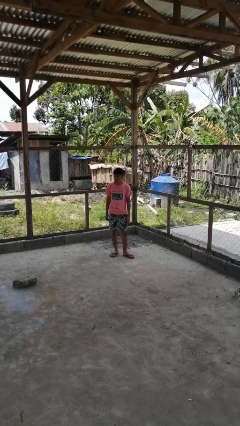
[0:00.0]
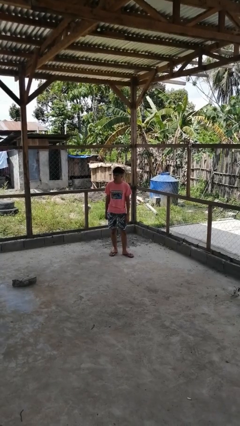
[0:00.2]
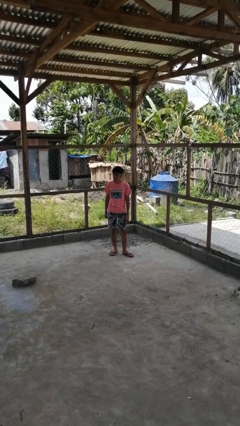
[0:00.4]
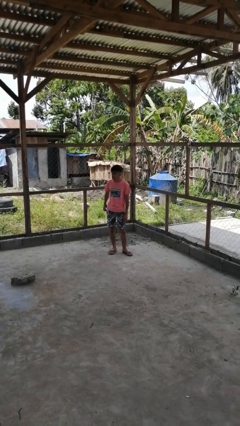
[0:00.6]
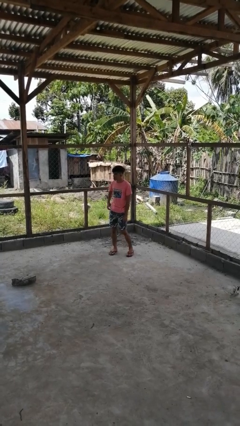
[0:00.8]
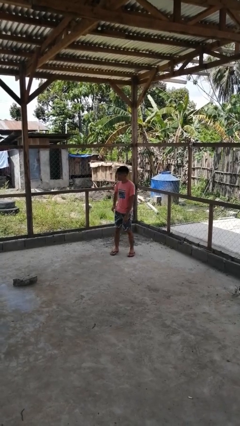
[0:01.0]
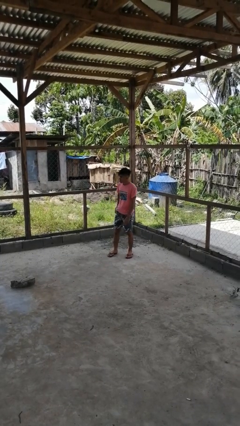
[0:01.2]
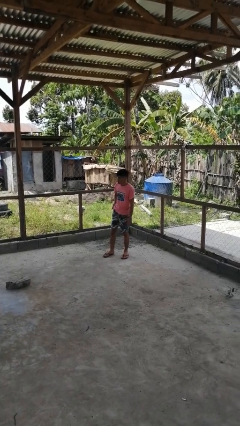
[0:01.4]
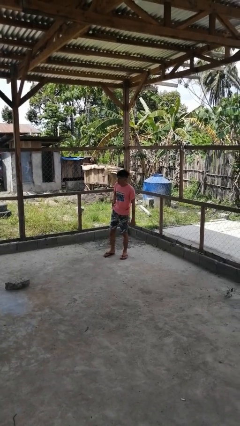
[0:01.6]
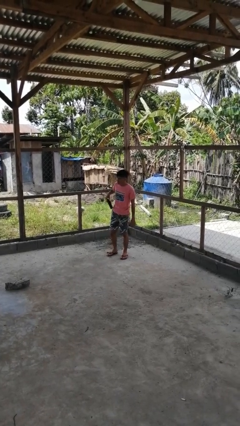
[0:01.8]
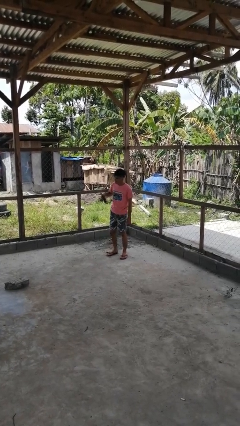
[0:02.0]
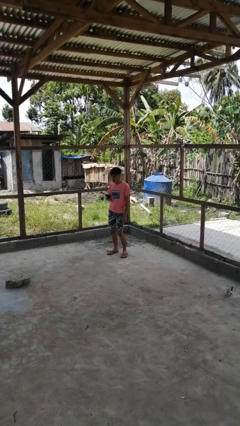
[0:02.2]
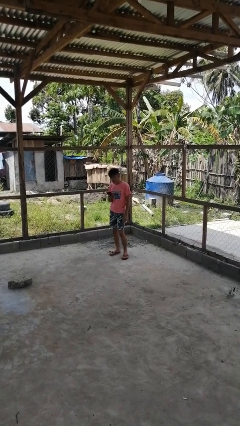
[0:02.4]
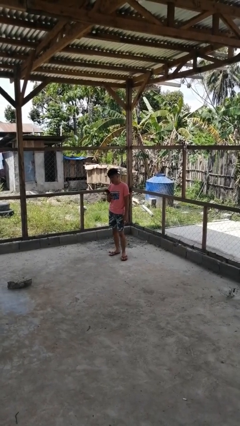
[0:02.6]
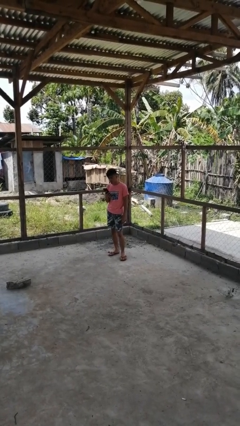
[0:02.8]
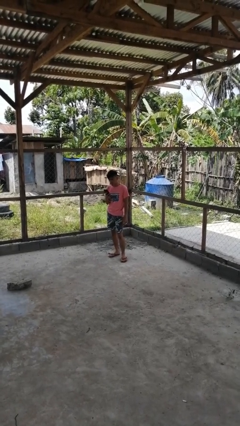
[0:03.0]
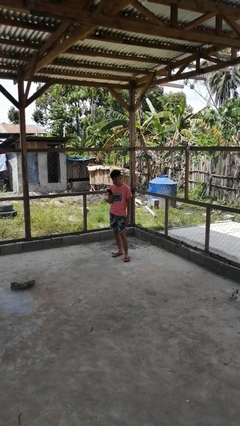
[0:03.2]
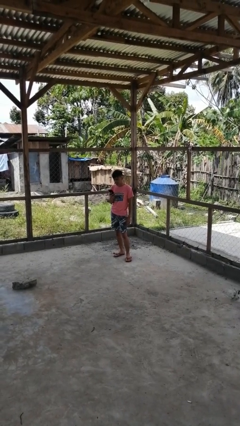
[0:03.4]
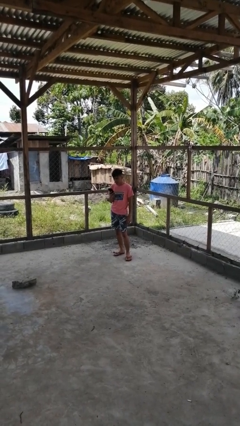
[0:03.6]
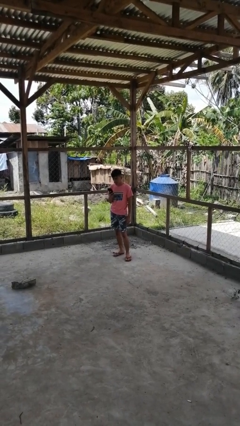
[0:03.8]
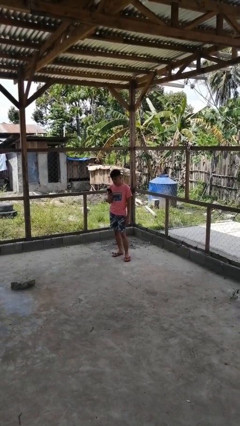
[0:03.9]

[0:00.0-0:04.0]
person takes phone from pocket

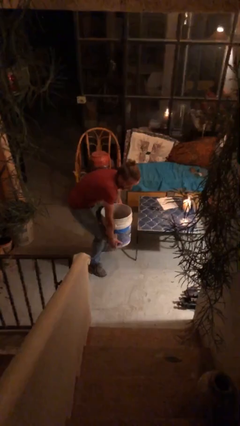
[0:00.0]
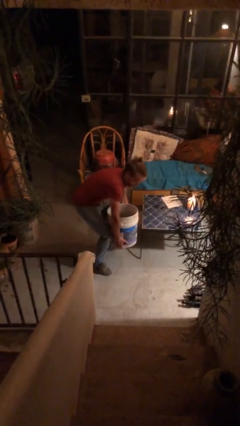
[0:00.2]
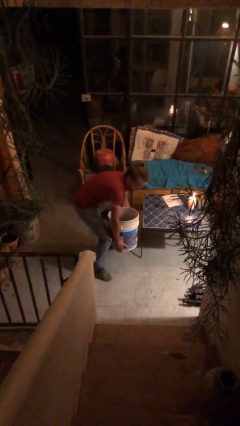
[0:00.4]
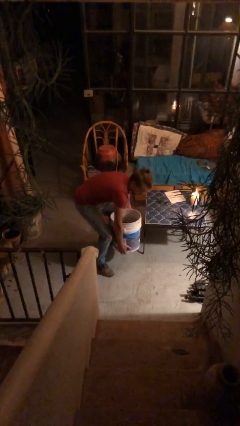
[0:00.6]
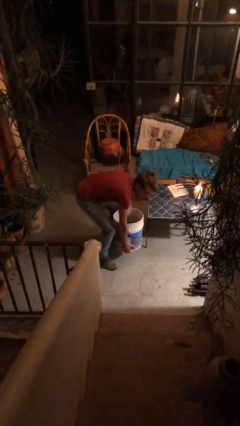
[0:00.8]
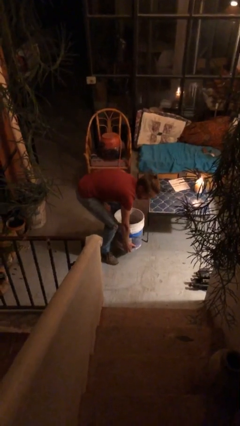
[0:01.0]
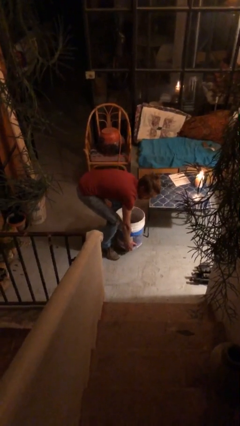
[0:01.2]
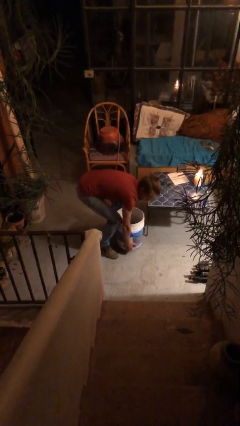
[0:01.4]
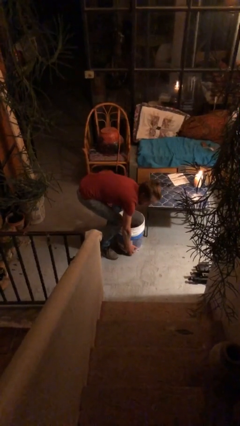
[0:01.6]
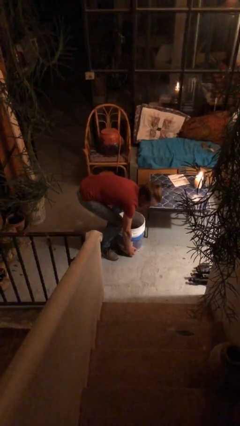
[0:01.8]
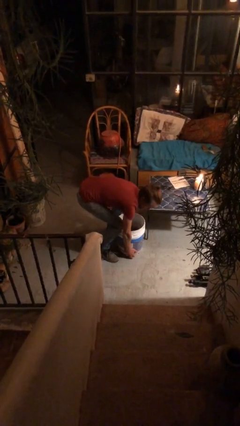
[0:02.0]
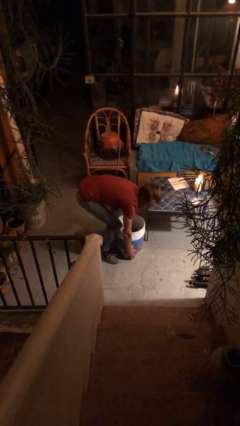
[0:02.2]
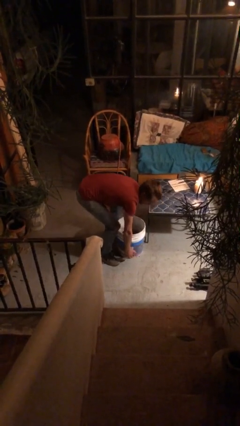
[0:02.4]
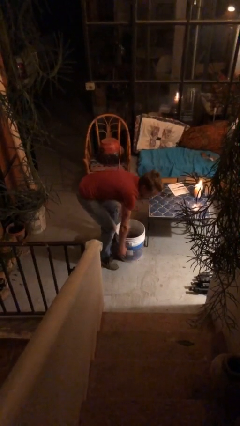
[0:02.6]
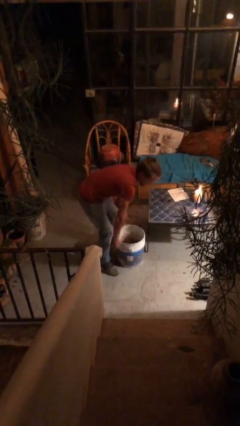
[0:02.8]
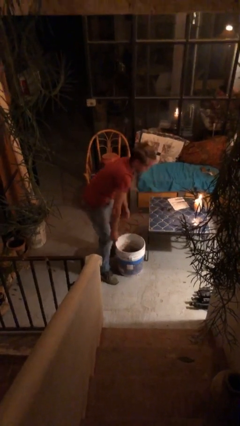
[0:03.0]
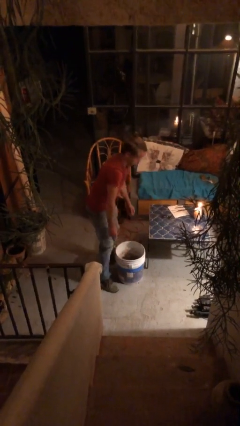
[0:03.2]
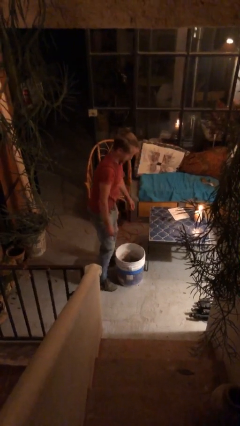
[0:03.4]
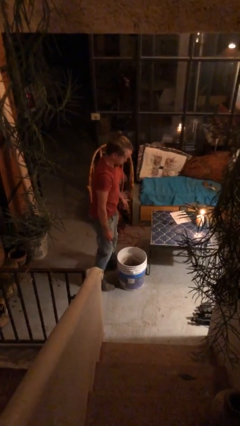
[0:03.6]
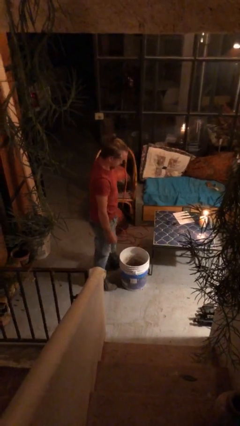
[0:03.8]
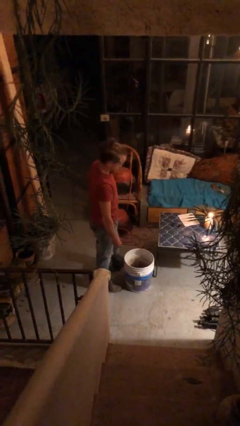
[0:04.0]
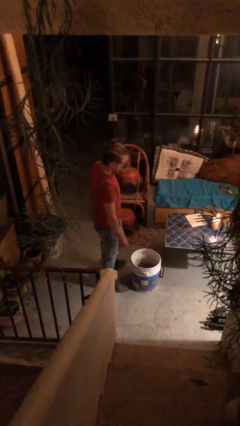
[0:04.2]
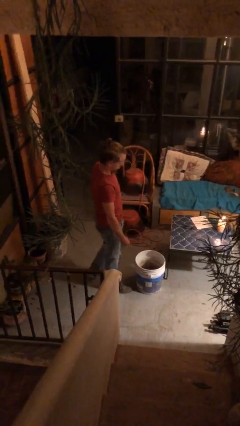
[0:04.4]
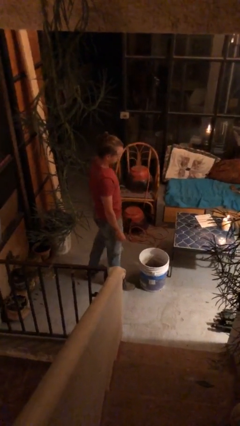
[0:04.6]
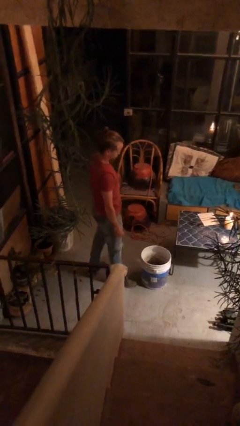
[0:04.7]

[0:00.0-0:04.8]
person puts down object on floor

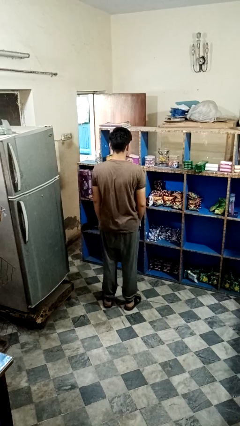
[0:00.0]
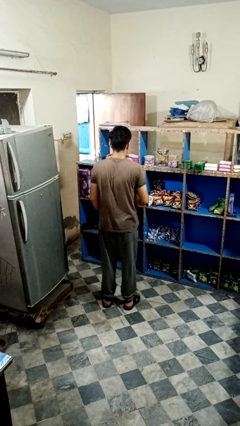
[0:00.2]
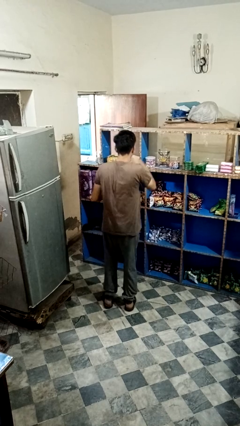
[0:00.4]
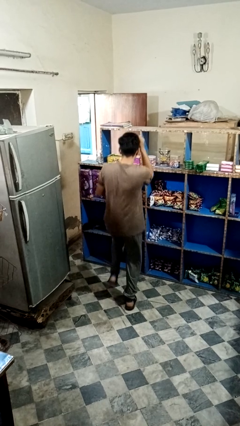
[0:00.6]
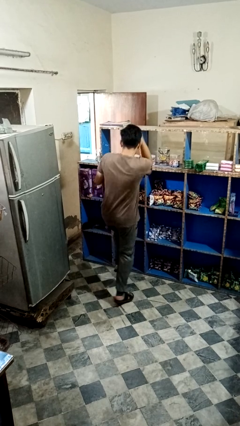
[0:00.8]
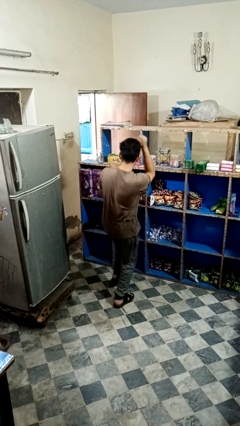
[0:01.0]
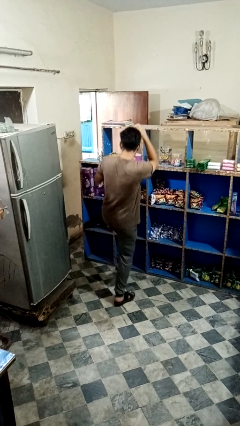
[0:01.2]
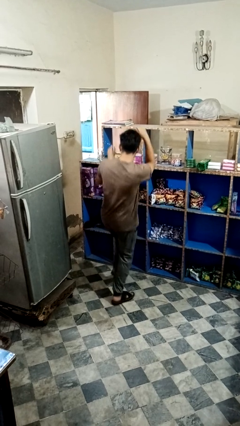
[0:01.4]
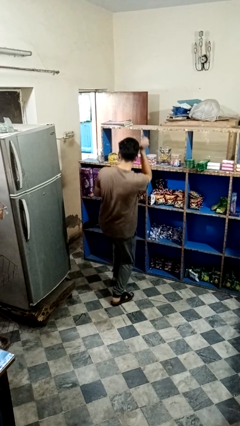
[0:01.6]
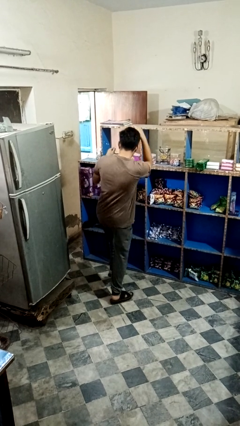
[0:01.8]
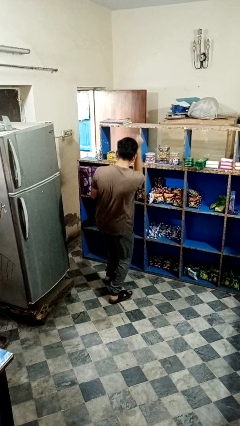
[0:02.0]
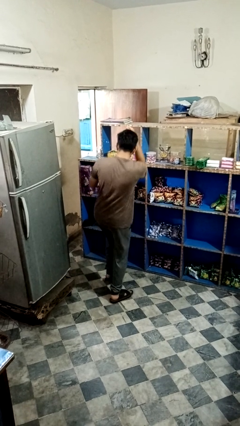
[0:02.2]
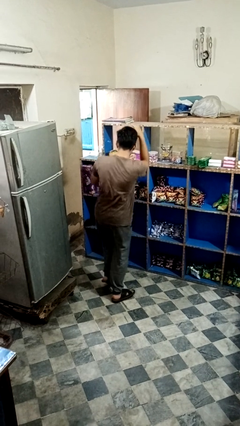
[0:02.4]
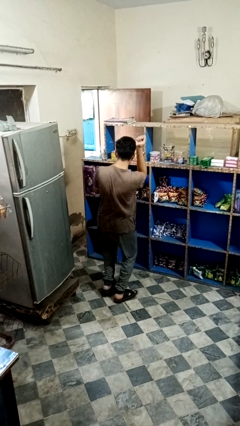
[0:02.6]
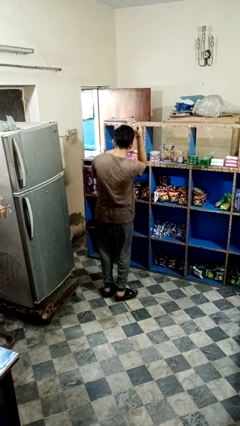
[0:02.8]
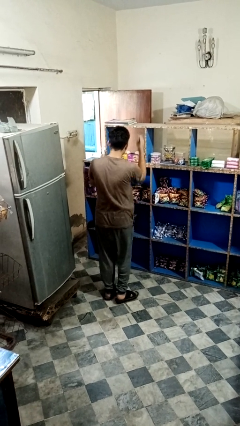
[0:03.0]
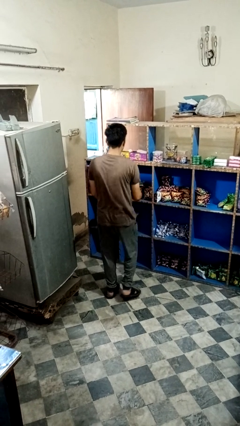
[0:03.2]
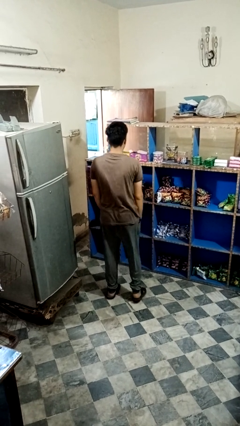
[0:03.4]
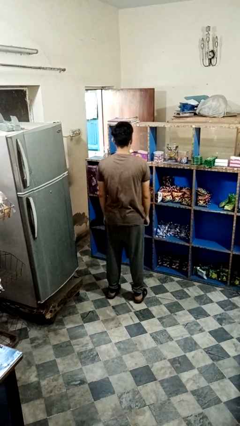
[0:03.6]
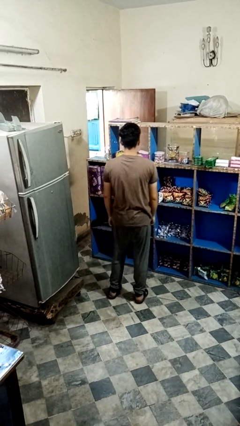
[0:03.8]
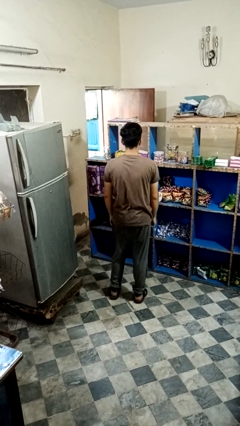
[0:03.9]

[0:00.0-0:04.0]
person dances in place

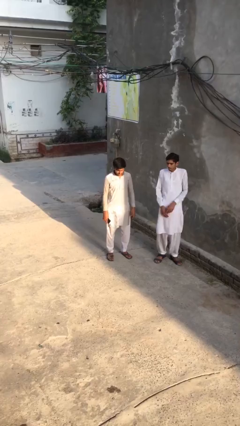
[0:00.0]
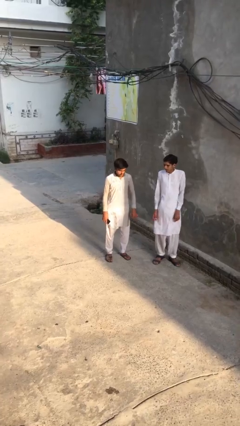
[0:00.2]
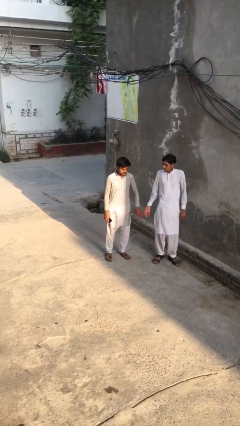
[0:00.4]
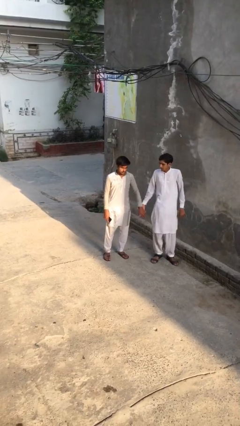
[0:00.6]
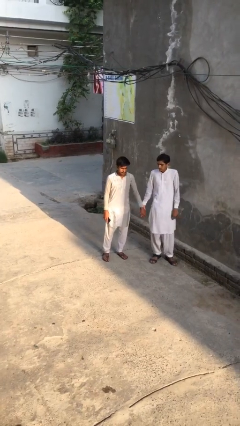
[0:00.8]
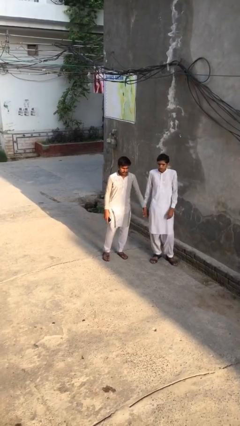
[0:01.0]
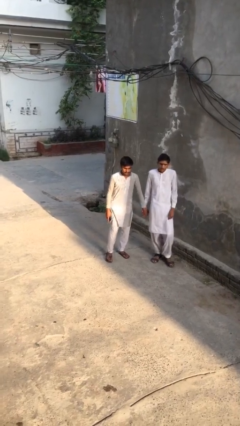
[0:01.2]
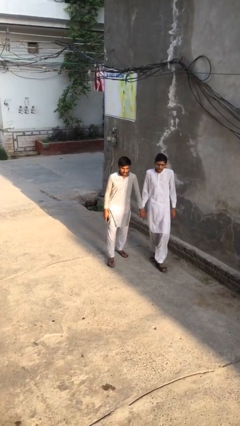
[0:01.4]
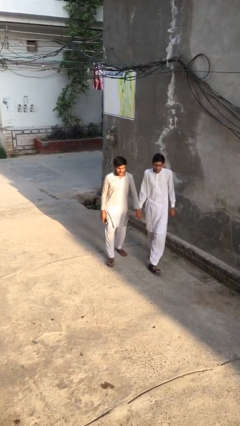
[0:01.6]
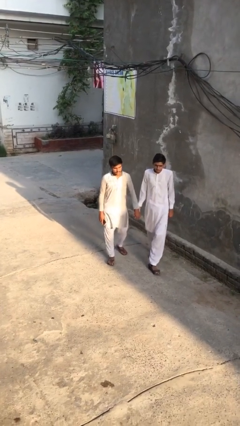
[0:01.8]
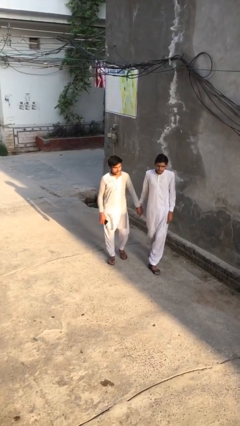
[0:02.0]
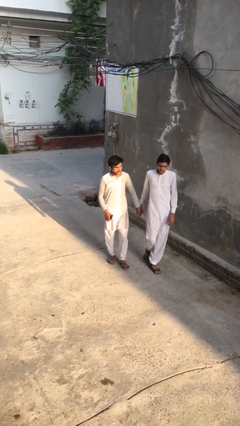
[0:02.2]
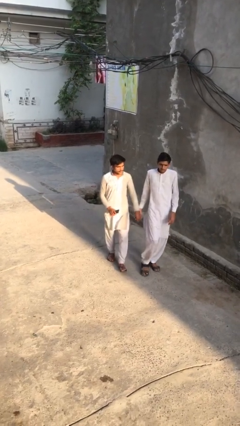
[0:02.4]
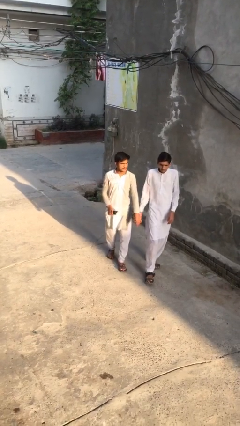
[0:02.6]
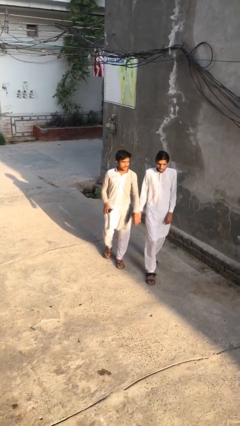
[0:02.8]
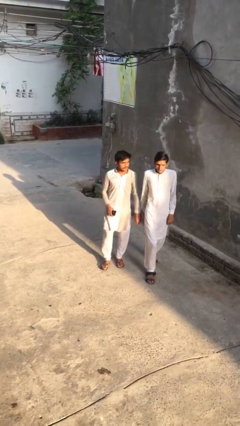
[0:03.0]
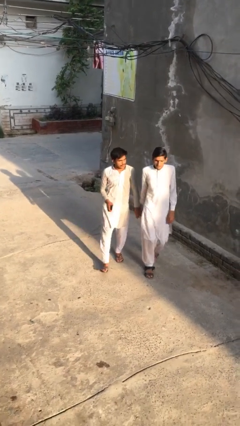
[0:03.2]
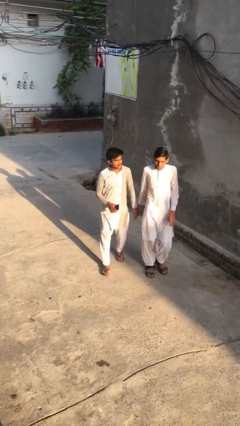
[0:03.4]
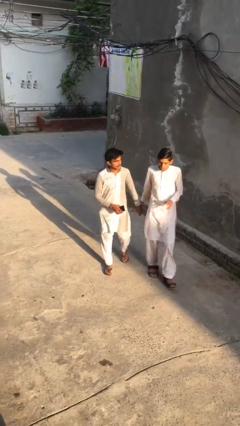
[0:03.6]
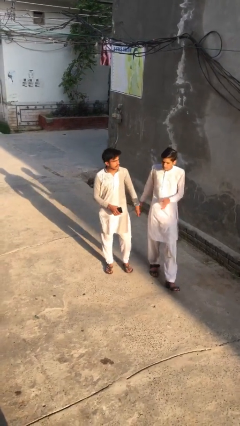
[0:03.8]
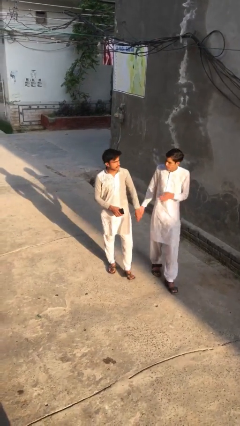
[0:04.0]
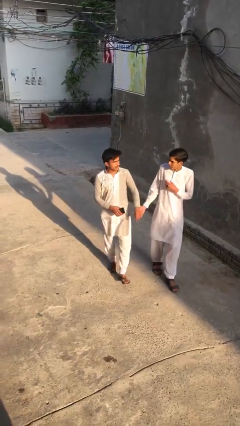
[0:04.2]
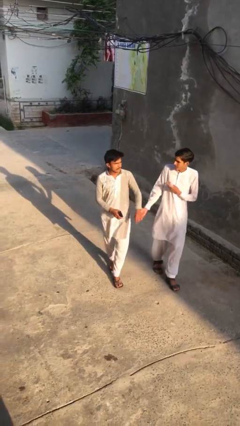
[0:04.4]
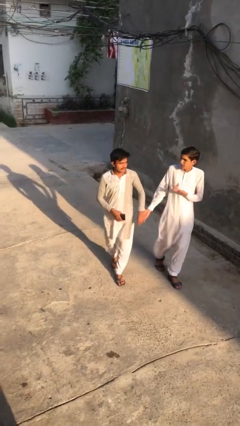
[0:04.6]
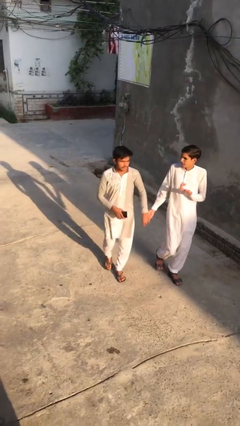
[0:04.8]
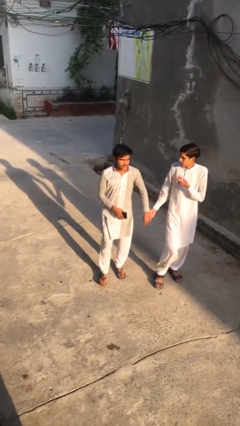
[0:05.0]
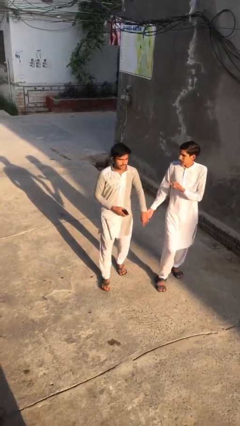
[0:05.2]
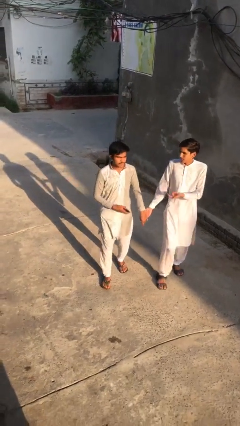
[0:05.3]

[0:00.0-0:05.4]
person holds hand
